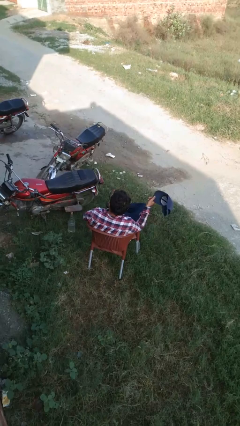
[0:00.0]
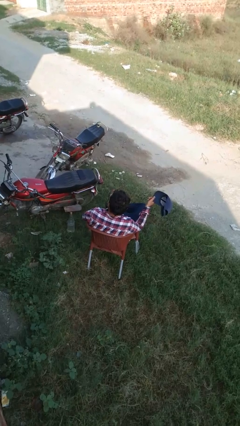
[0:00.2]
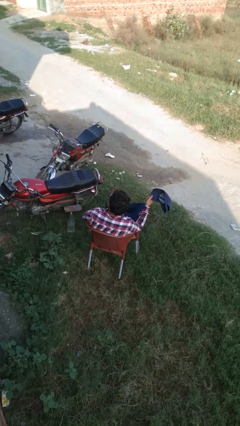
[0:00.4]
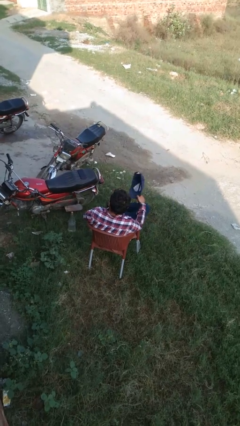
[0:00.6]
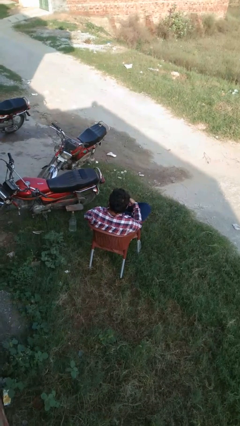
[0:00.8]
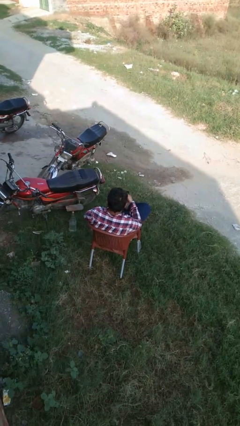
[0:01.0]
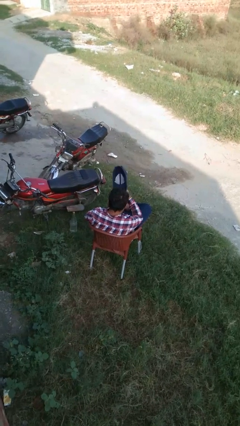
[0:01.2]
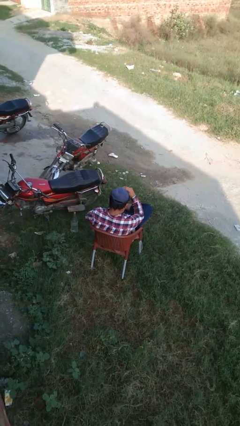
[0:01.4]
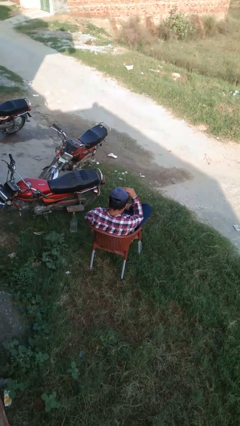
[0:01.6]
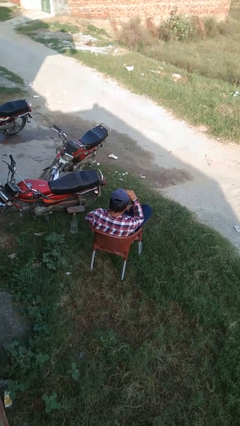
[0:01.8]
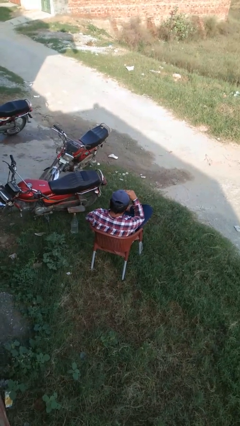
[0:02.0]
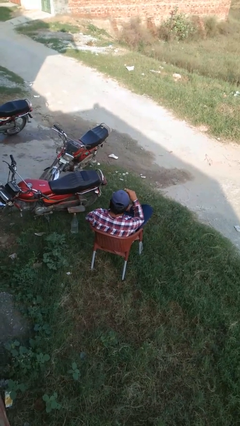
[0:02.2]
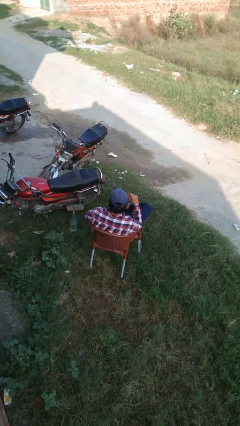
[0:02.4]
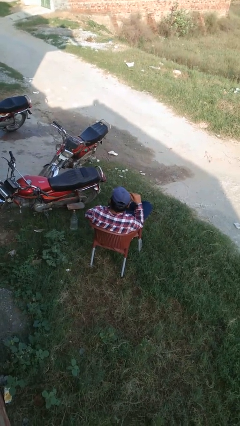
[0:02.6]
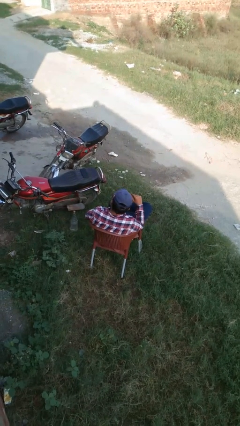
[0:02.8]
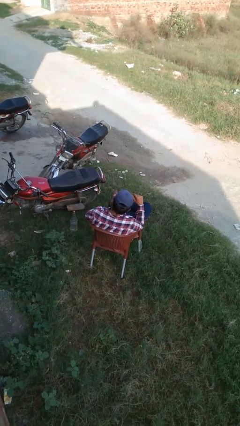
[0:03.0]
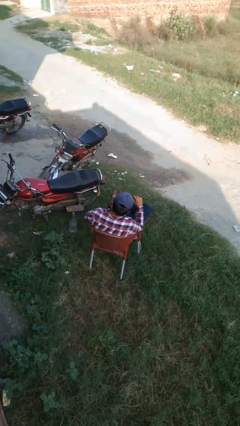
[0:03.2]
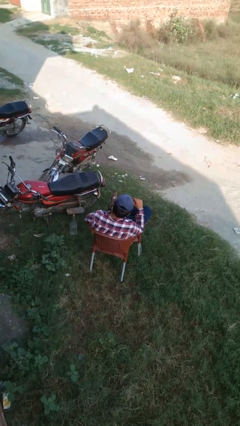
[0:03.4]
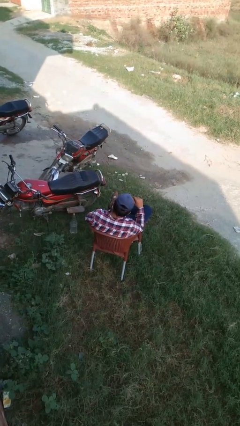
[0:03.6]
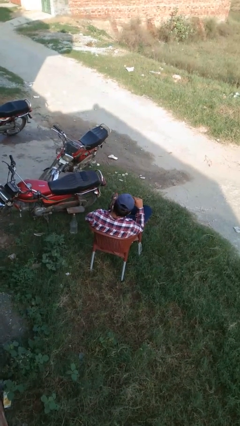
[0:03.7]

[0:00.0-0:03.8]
person puts on hat

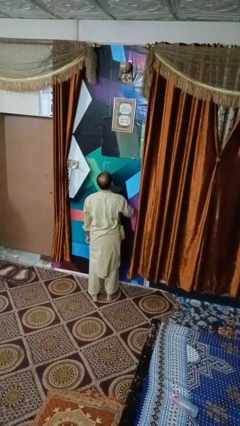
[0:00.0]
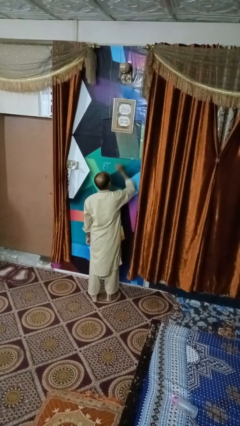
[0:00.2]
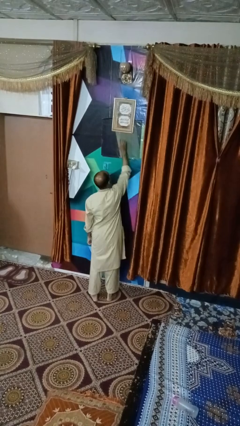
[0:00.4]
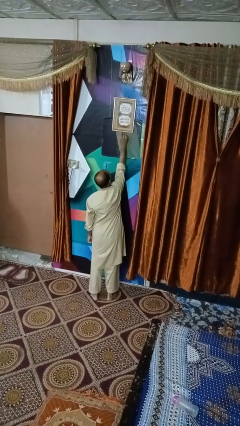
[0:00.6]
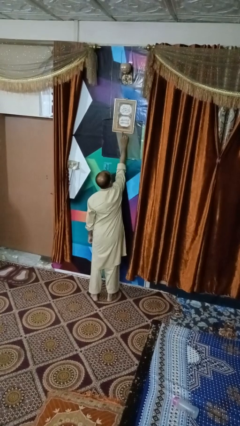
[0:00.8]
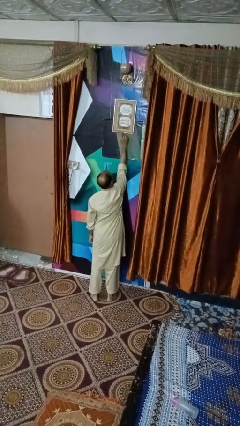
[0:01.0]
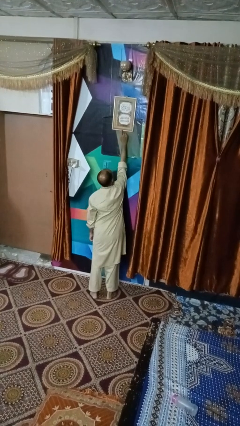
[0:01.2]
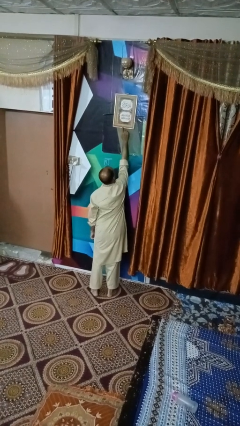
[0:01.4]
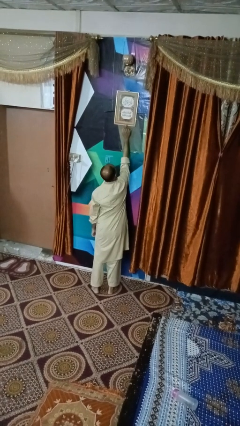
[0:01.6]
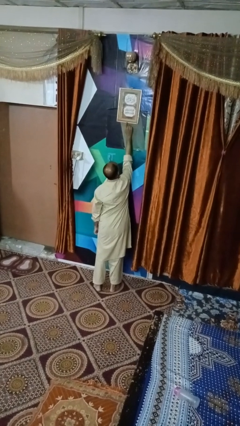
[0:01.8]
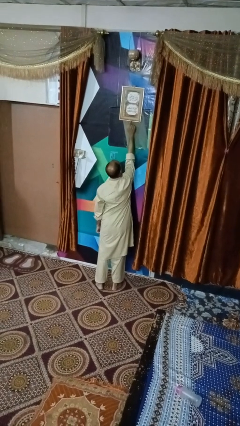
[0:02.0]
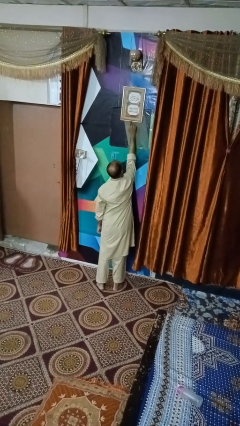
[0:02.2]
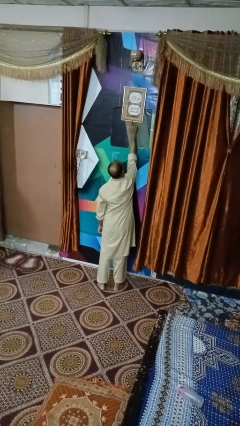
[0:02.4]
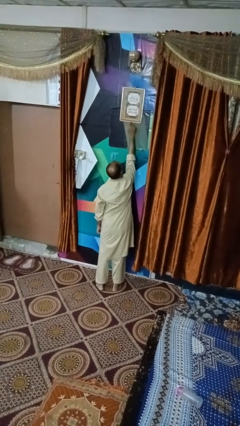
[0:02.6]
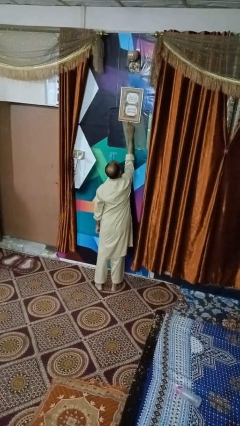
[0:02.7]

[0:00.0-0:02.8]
person taps object with finger

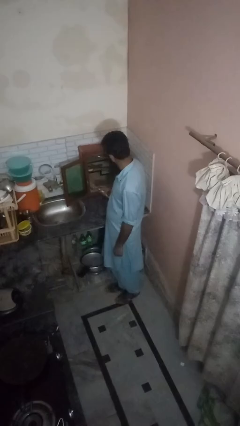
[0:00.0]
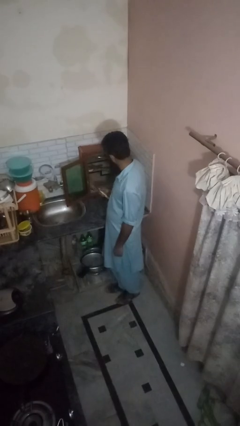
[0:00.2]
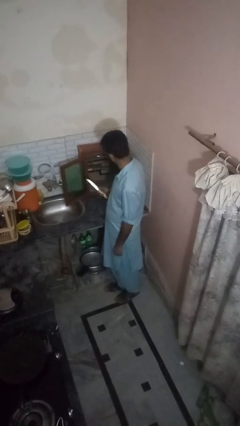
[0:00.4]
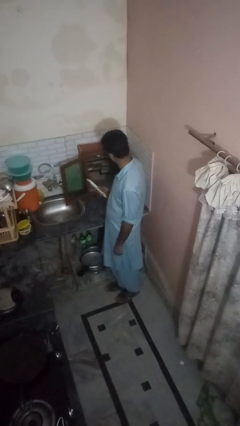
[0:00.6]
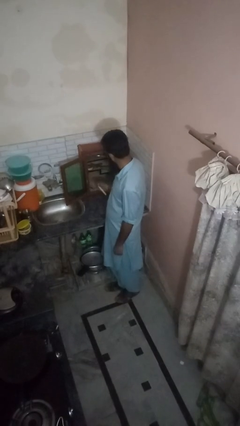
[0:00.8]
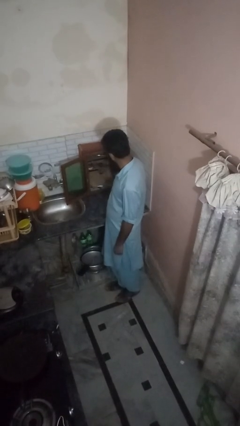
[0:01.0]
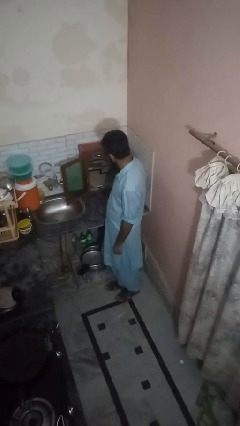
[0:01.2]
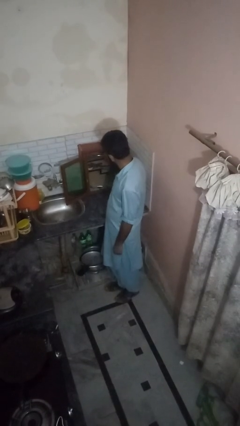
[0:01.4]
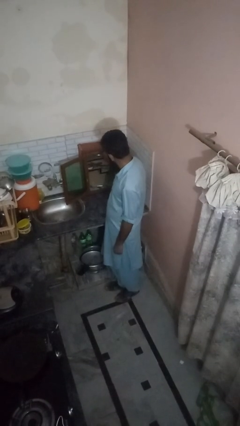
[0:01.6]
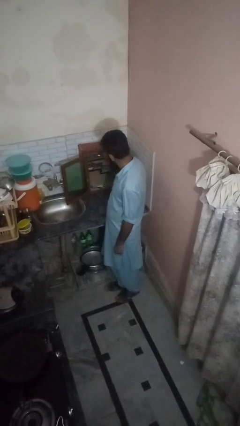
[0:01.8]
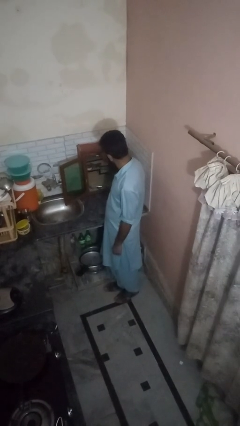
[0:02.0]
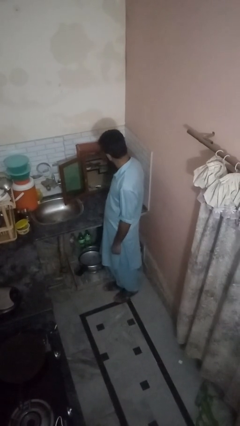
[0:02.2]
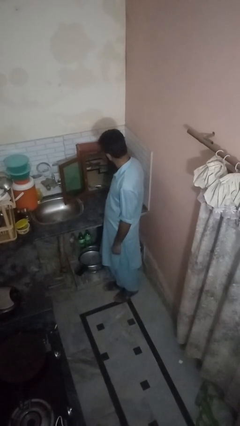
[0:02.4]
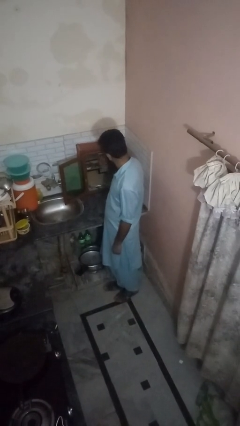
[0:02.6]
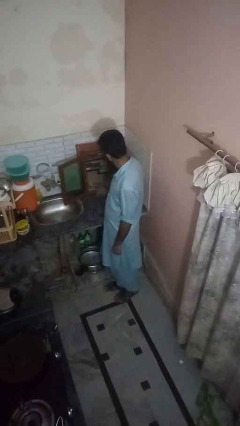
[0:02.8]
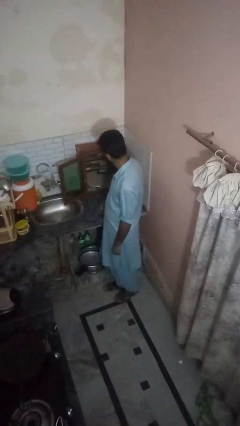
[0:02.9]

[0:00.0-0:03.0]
person puts object into kitchen drawer

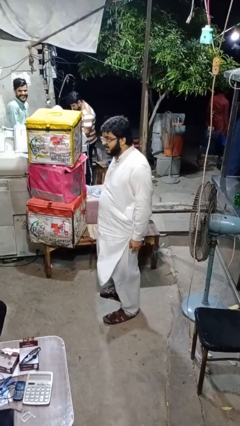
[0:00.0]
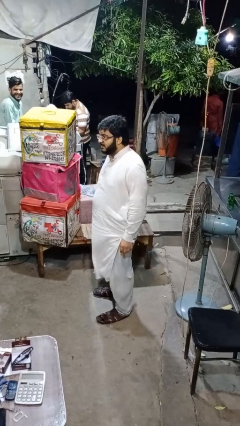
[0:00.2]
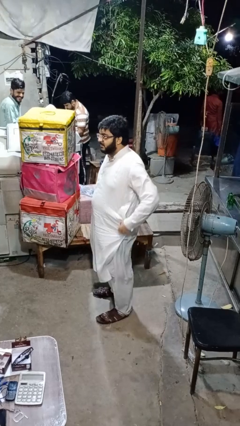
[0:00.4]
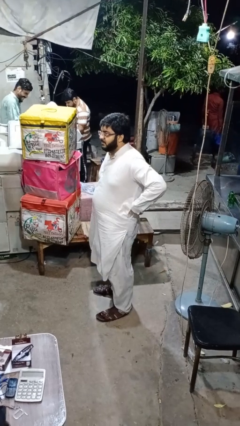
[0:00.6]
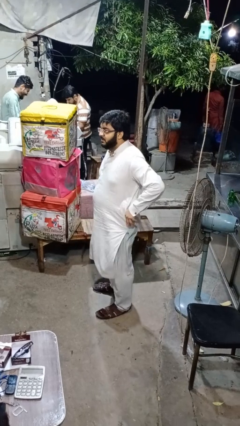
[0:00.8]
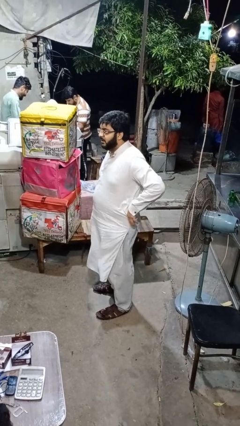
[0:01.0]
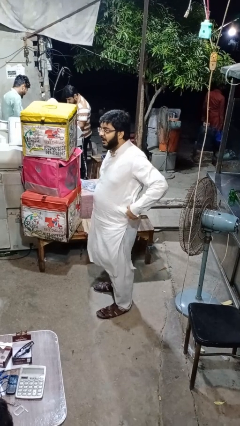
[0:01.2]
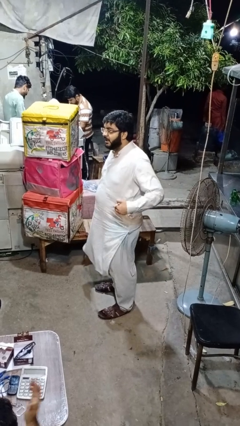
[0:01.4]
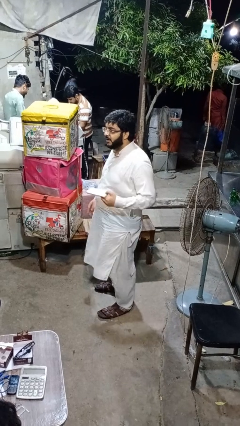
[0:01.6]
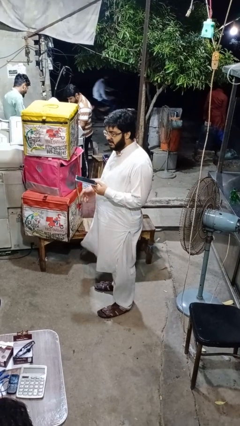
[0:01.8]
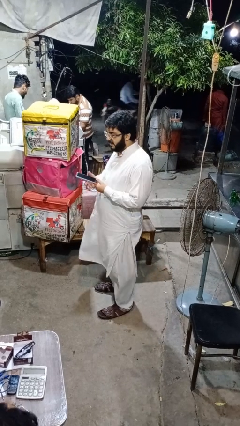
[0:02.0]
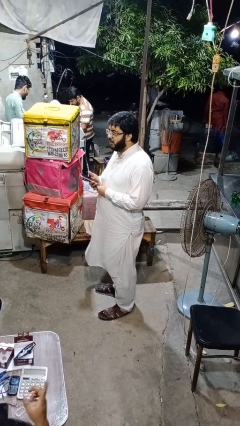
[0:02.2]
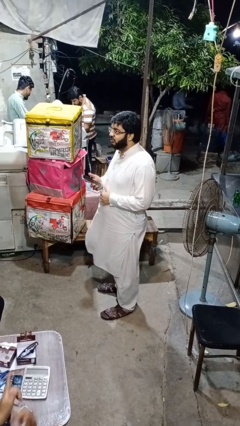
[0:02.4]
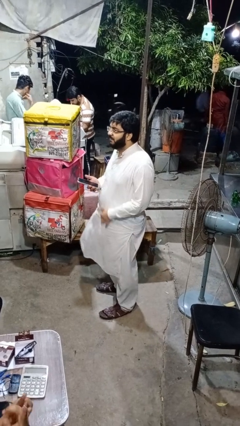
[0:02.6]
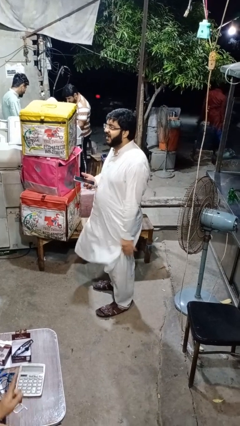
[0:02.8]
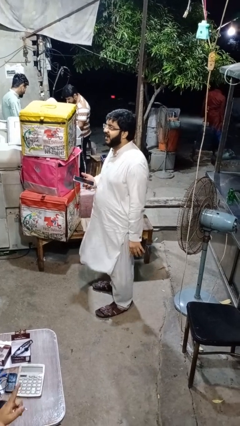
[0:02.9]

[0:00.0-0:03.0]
person takes phone from pocket

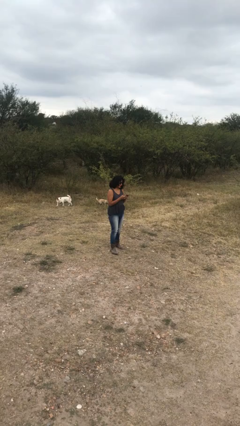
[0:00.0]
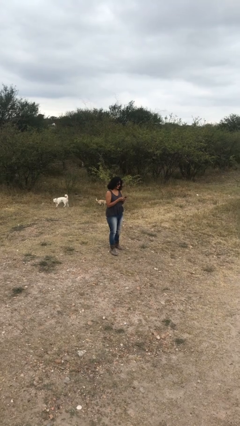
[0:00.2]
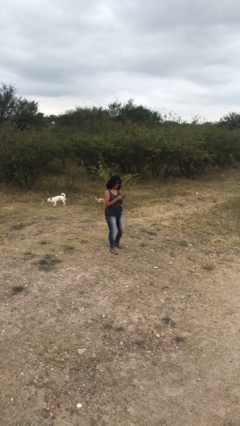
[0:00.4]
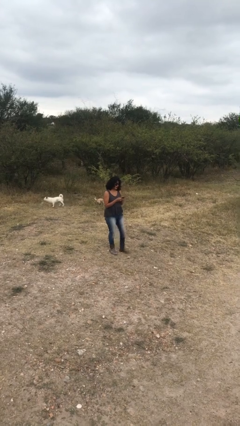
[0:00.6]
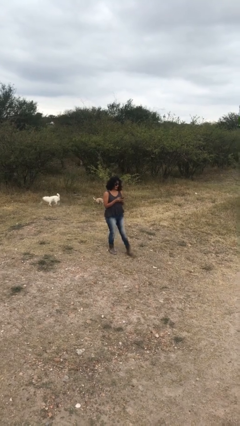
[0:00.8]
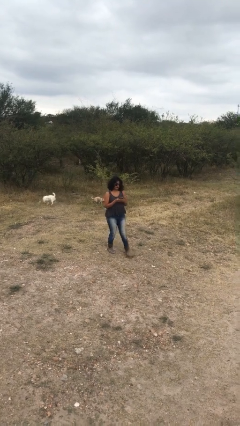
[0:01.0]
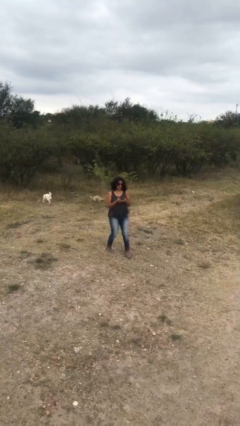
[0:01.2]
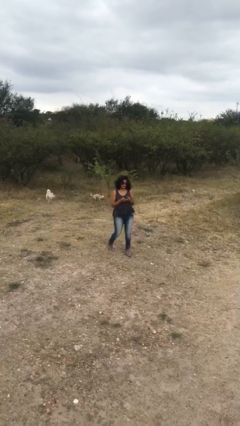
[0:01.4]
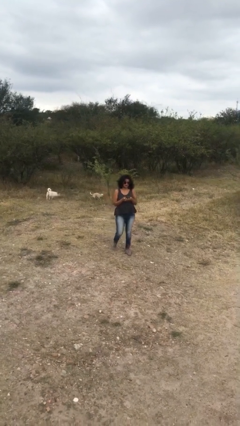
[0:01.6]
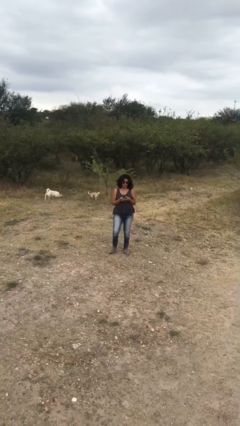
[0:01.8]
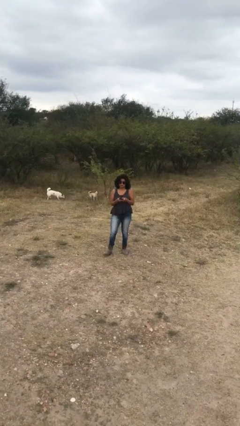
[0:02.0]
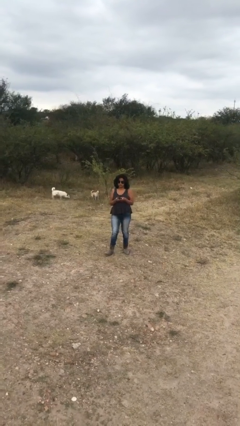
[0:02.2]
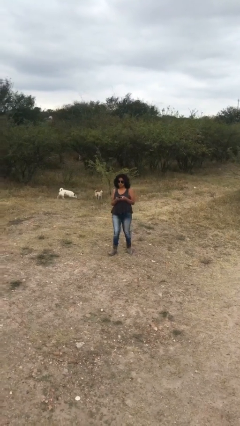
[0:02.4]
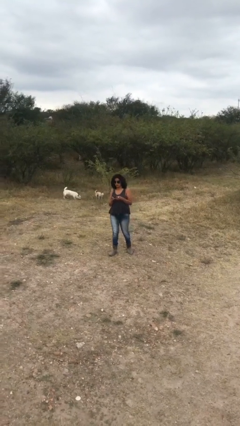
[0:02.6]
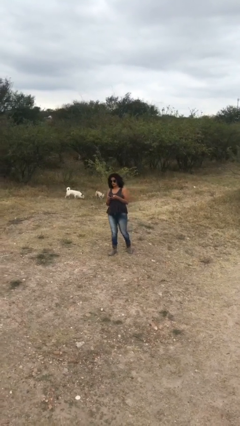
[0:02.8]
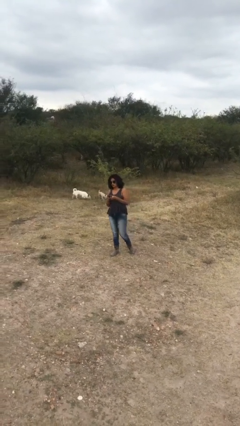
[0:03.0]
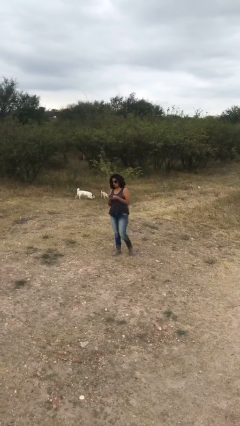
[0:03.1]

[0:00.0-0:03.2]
person texts on phone

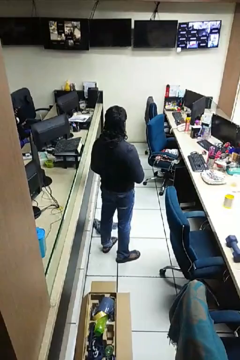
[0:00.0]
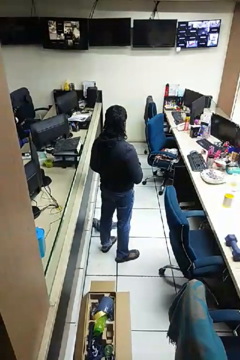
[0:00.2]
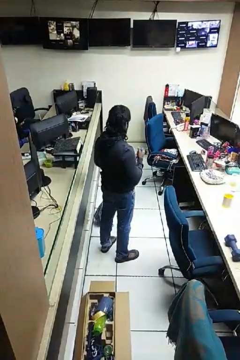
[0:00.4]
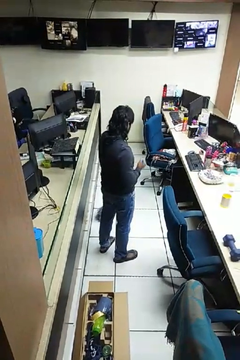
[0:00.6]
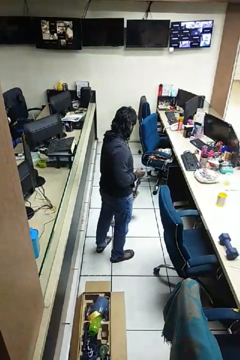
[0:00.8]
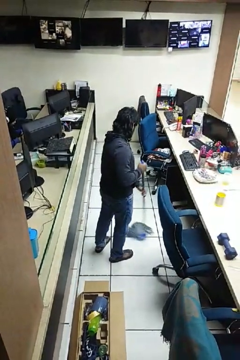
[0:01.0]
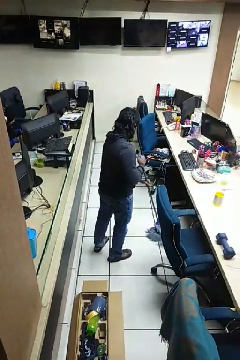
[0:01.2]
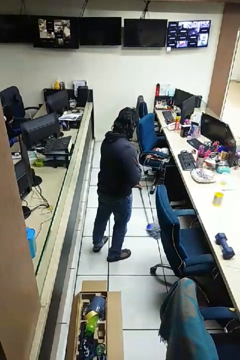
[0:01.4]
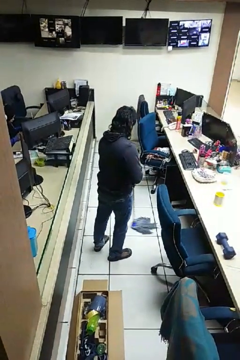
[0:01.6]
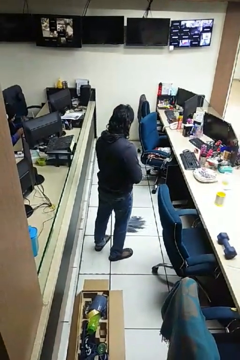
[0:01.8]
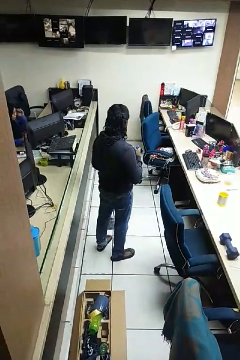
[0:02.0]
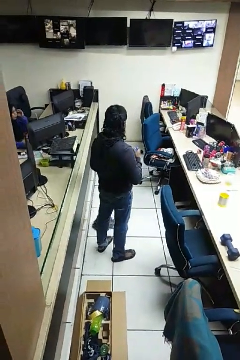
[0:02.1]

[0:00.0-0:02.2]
person mops
